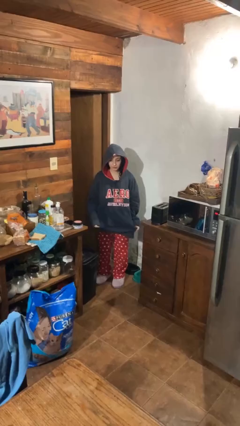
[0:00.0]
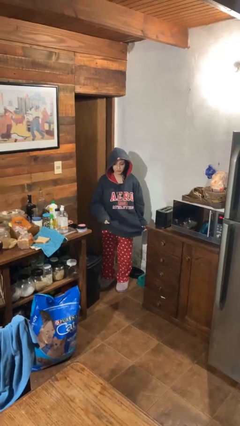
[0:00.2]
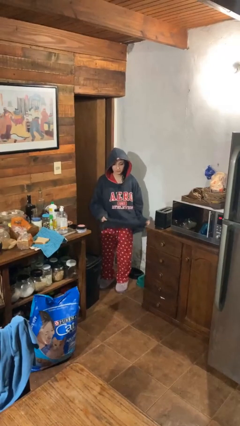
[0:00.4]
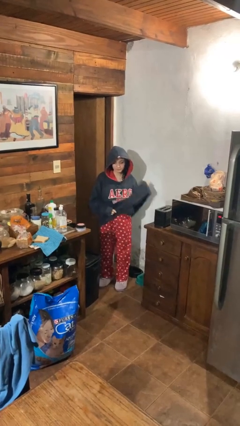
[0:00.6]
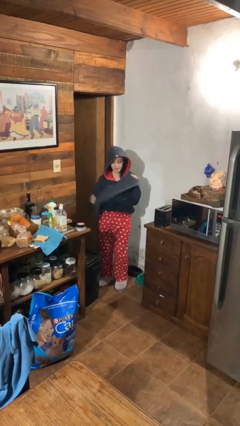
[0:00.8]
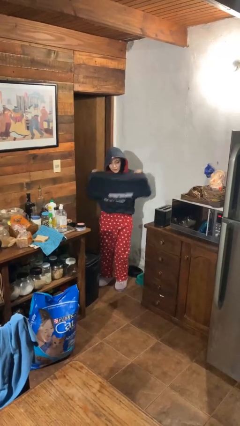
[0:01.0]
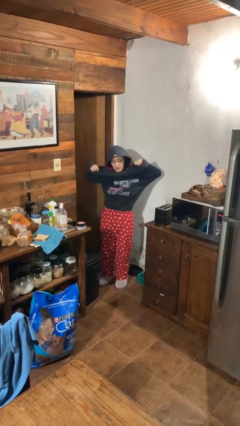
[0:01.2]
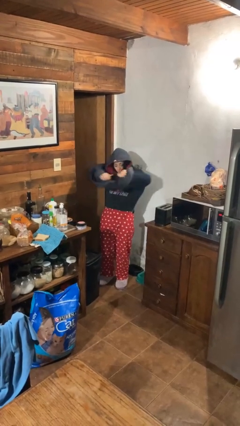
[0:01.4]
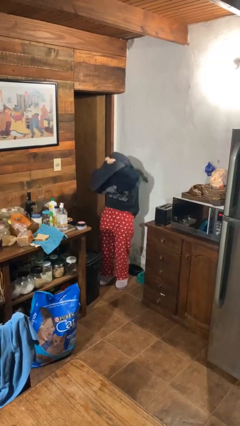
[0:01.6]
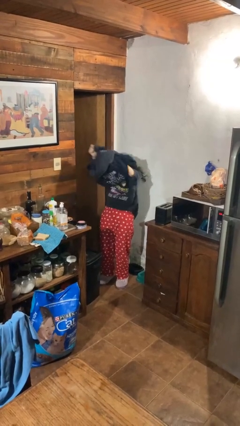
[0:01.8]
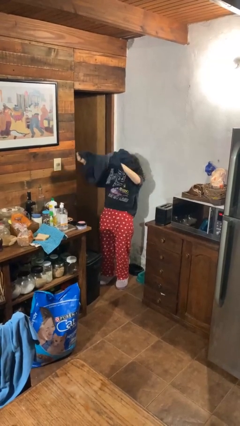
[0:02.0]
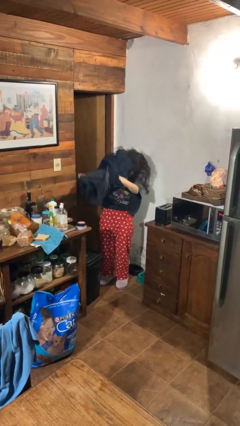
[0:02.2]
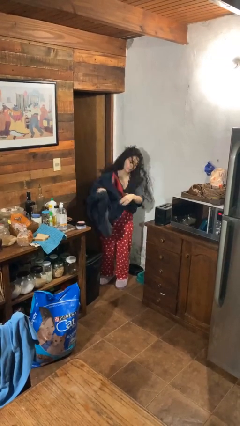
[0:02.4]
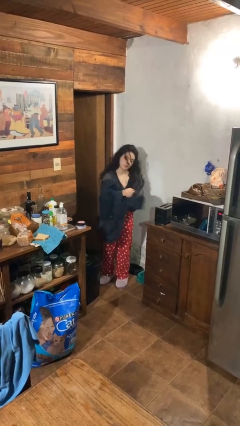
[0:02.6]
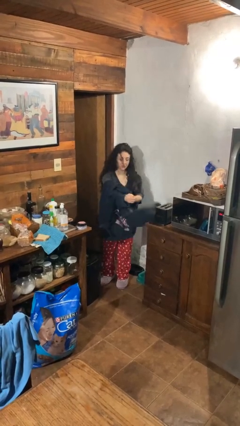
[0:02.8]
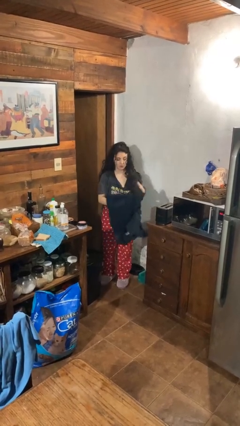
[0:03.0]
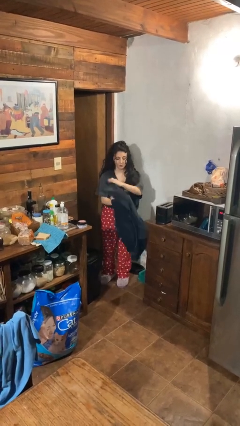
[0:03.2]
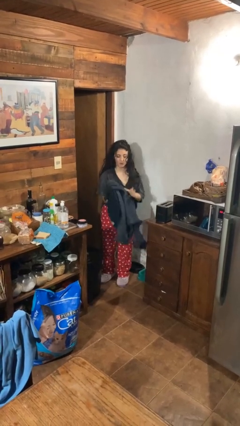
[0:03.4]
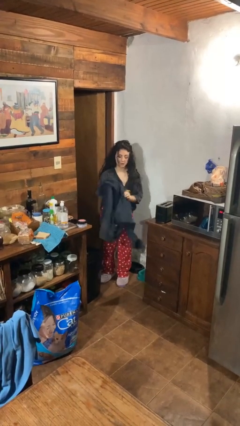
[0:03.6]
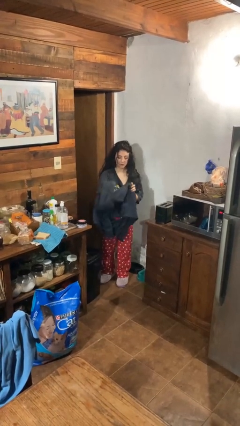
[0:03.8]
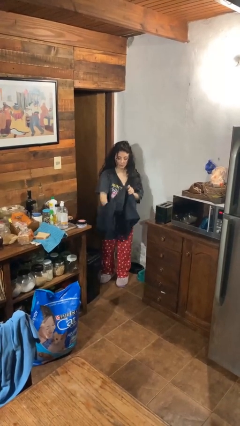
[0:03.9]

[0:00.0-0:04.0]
person takes off hoodie

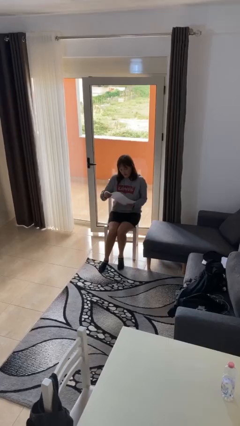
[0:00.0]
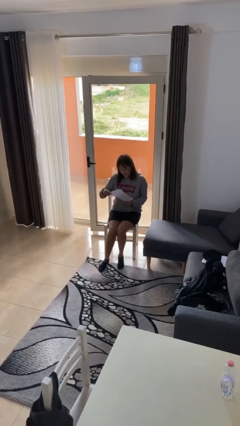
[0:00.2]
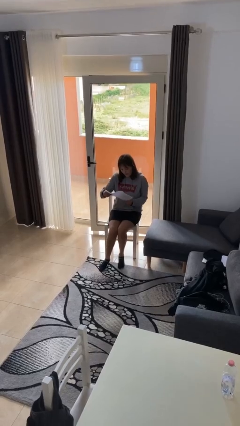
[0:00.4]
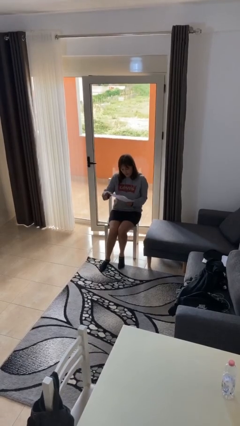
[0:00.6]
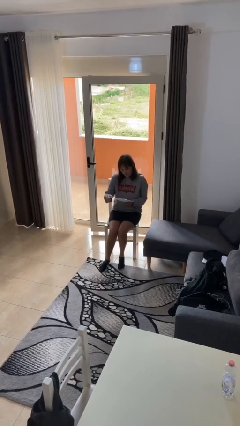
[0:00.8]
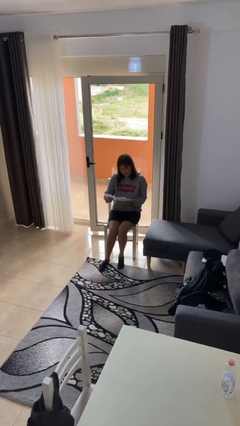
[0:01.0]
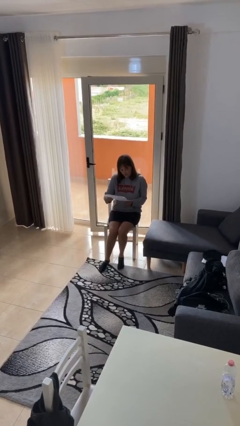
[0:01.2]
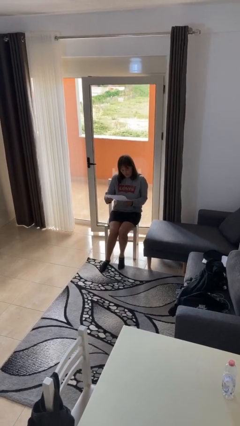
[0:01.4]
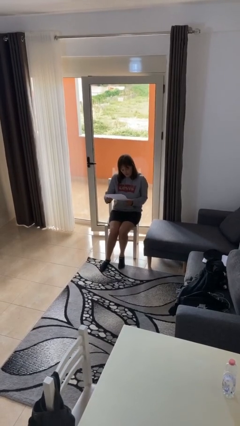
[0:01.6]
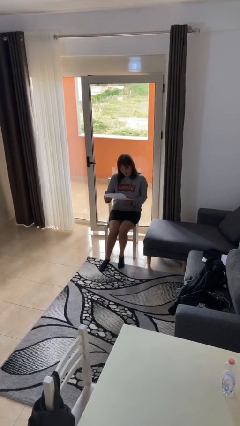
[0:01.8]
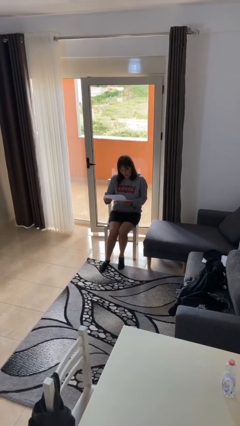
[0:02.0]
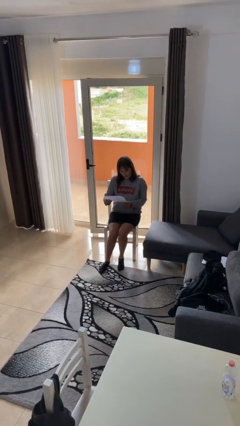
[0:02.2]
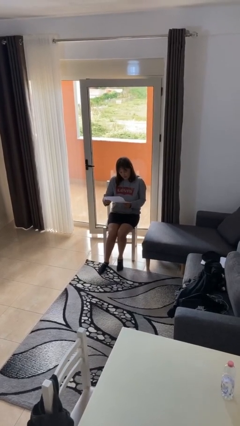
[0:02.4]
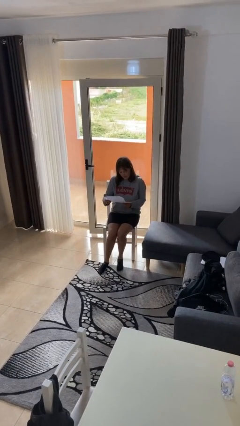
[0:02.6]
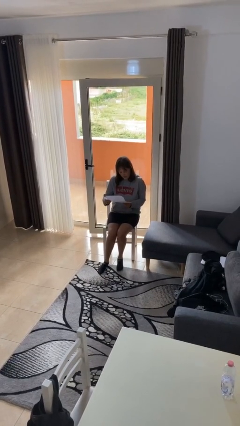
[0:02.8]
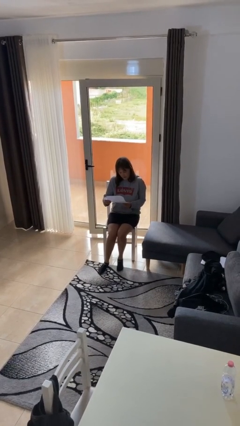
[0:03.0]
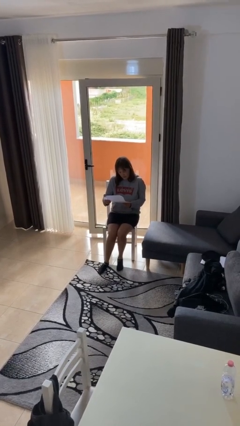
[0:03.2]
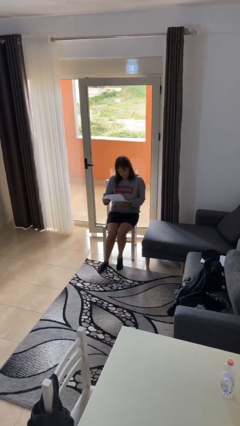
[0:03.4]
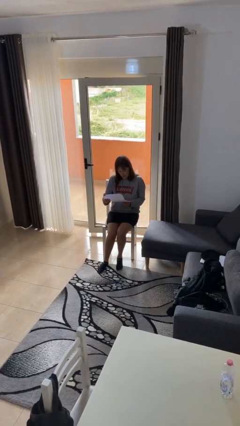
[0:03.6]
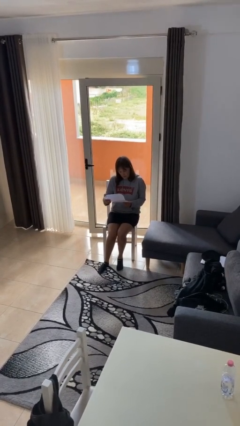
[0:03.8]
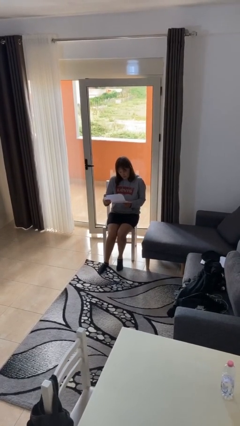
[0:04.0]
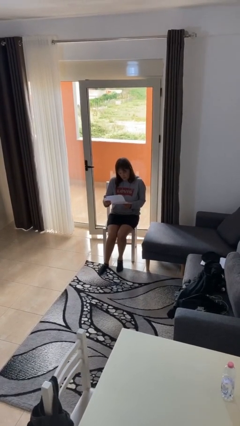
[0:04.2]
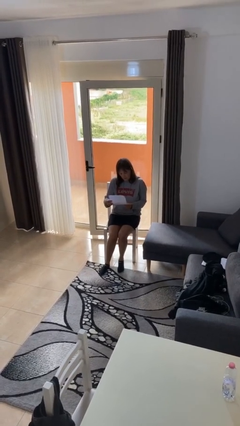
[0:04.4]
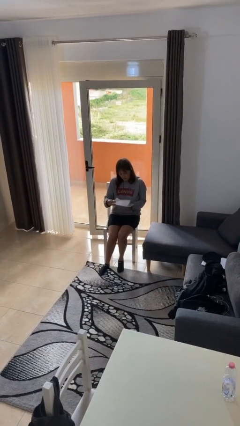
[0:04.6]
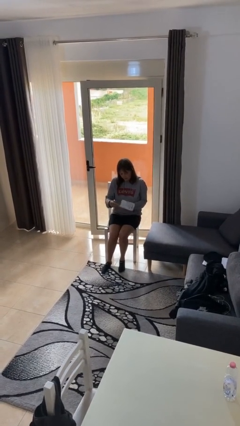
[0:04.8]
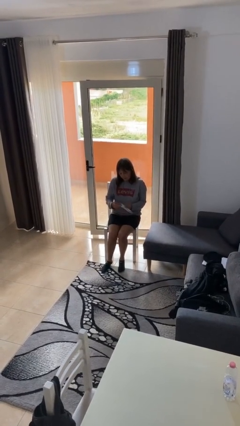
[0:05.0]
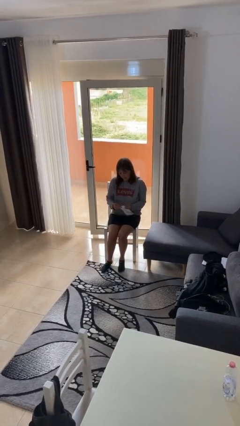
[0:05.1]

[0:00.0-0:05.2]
person reads document

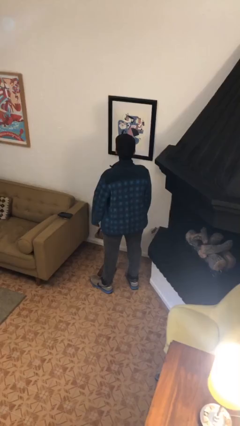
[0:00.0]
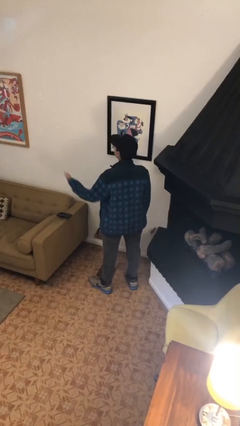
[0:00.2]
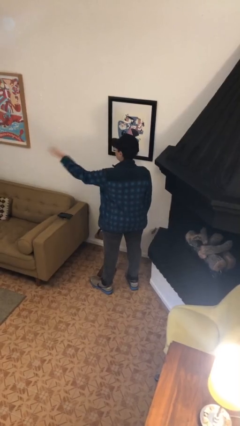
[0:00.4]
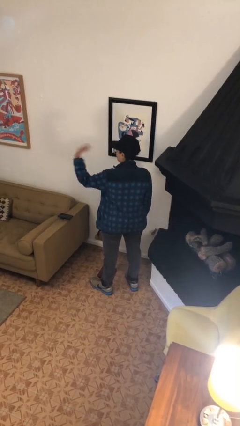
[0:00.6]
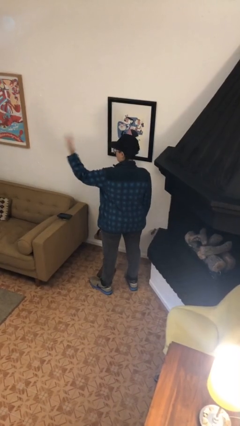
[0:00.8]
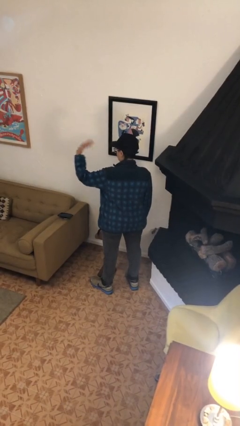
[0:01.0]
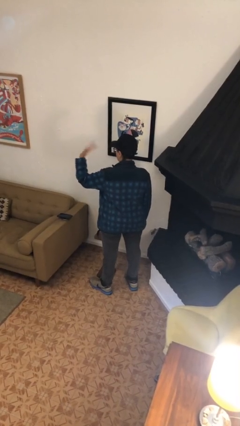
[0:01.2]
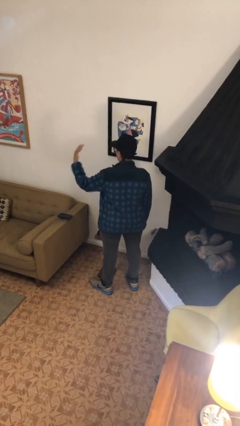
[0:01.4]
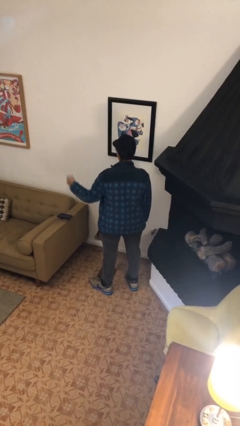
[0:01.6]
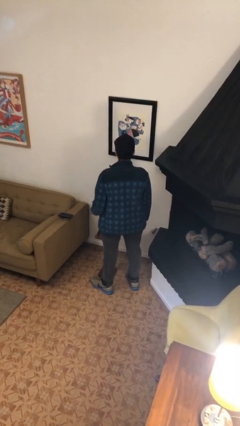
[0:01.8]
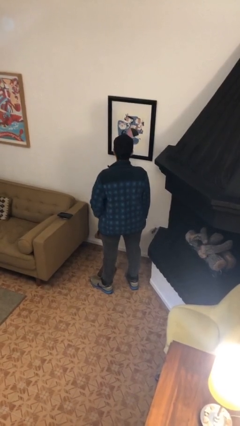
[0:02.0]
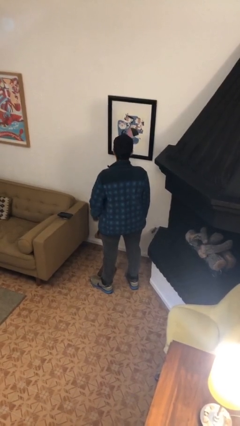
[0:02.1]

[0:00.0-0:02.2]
person gestures come here

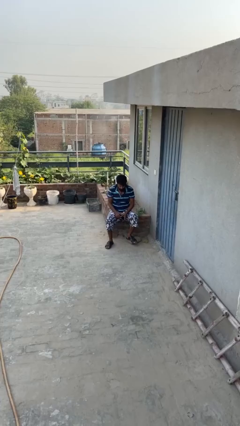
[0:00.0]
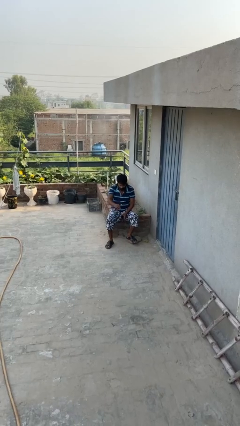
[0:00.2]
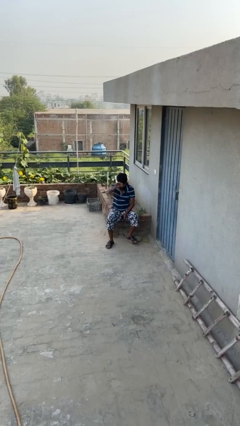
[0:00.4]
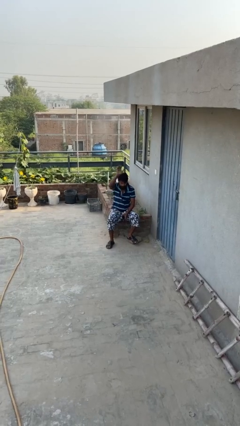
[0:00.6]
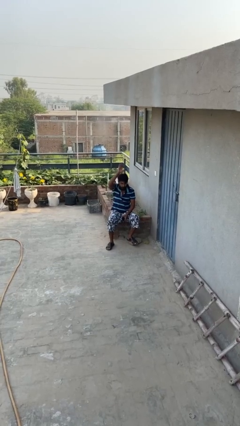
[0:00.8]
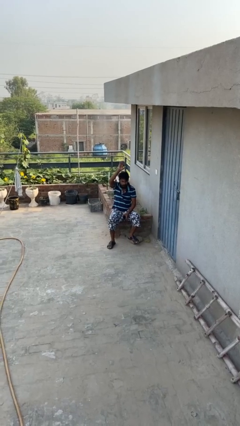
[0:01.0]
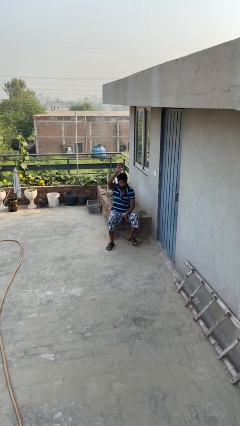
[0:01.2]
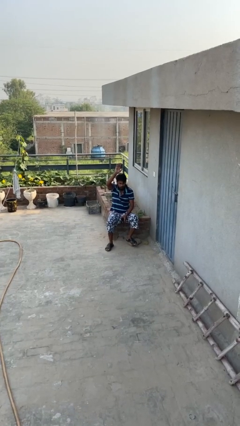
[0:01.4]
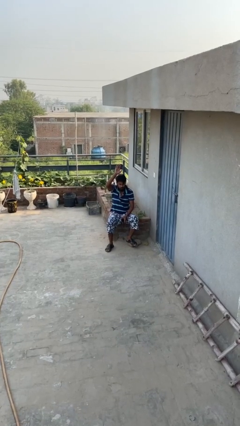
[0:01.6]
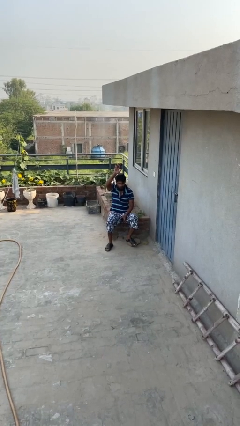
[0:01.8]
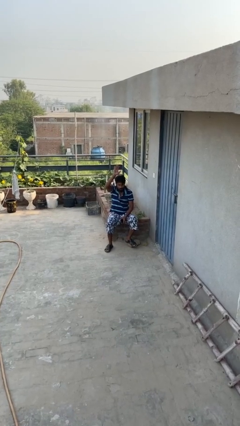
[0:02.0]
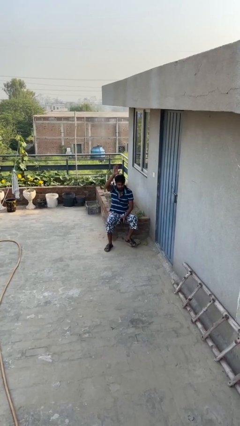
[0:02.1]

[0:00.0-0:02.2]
person gestures raise hand

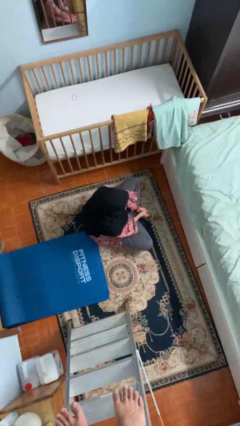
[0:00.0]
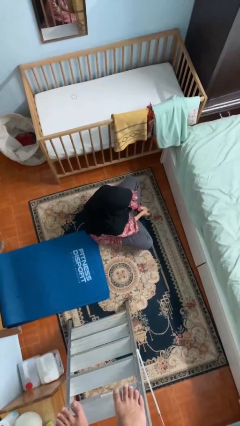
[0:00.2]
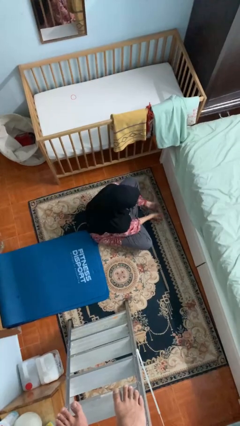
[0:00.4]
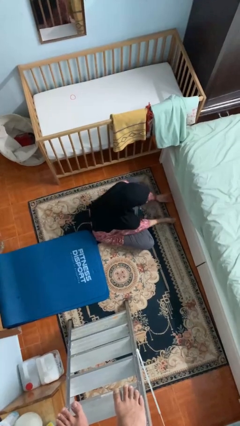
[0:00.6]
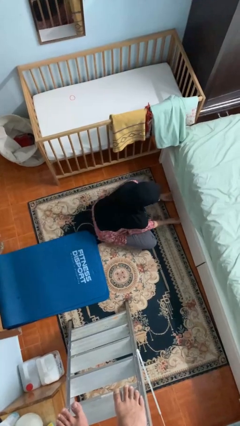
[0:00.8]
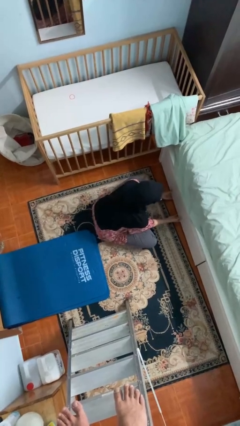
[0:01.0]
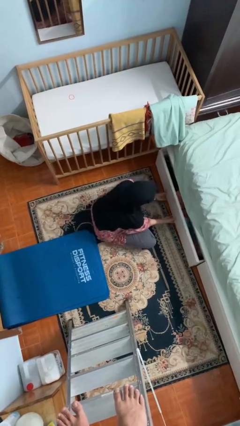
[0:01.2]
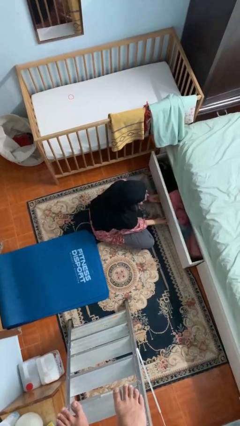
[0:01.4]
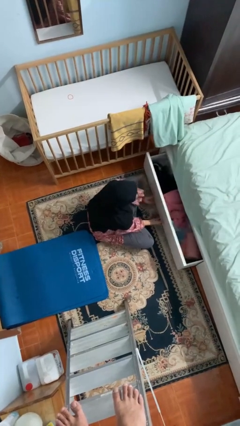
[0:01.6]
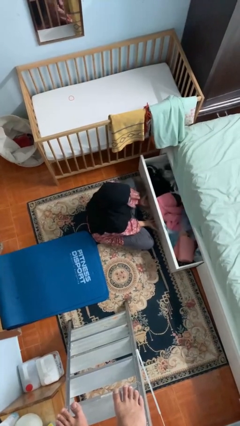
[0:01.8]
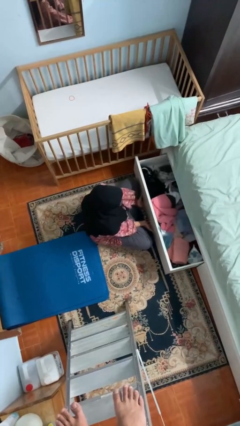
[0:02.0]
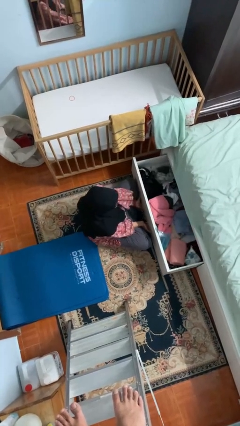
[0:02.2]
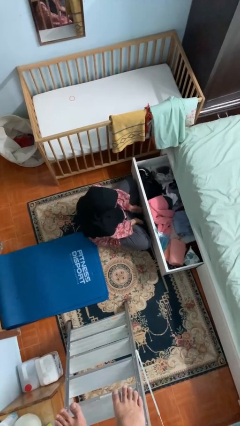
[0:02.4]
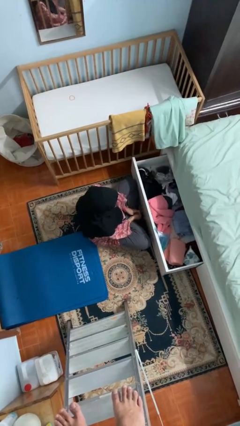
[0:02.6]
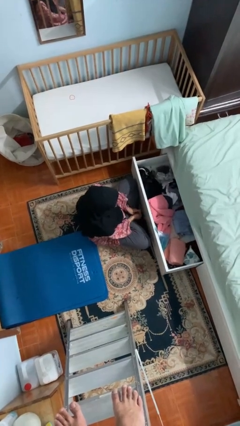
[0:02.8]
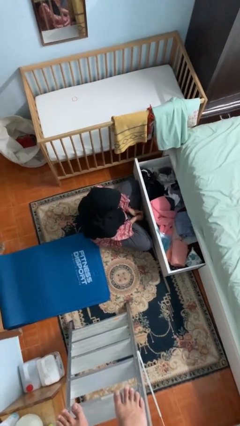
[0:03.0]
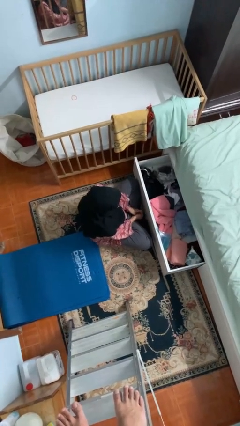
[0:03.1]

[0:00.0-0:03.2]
person opens dresser drawer

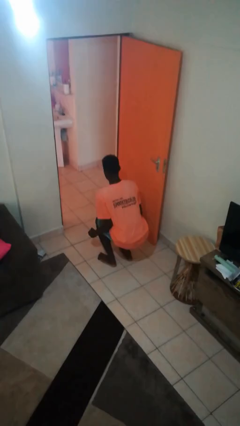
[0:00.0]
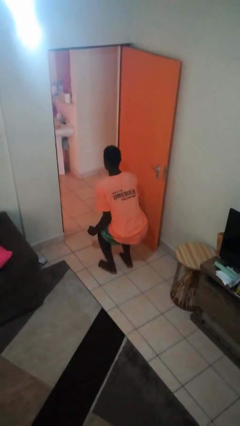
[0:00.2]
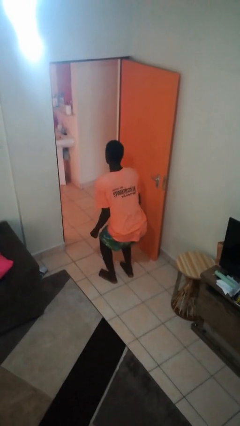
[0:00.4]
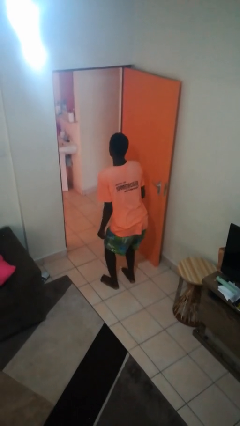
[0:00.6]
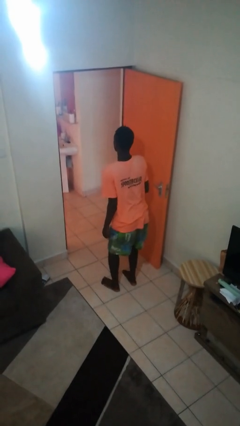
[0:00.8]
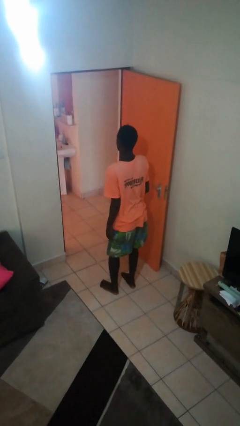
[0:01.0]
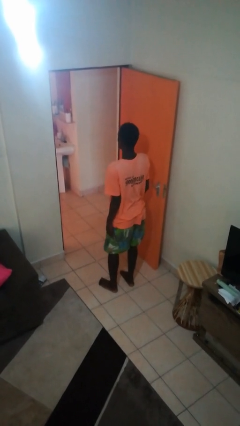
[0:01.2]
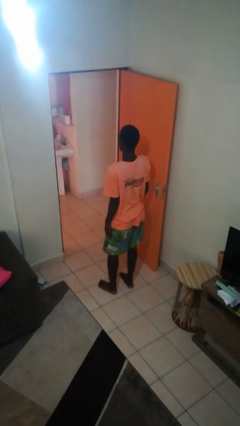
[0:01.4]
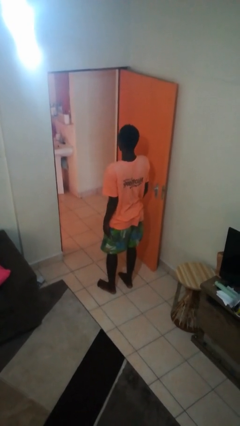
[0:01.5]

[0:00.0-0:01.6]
person stands up
